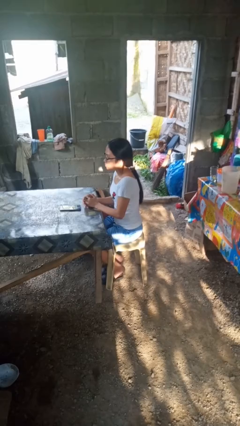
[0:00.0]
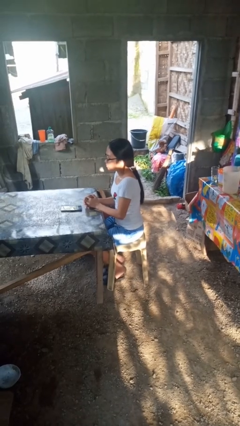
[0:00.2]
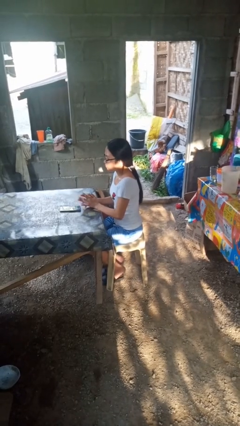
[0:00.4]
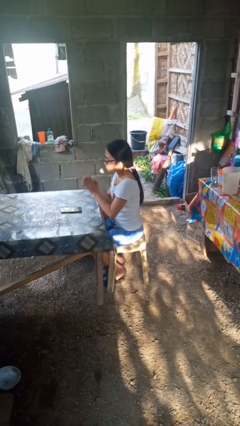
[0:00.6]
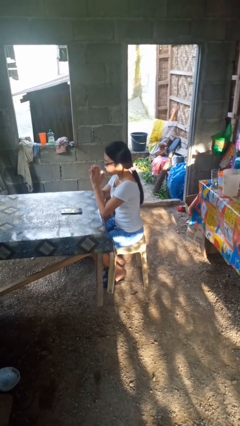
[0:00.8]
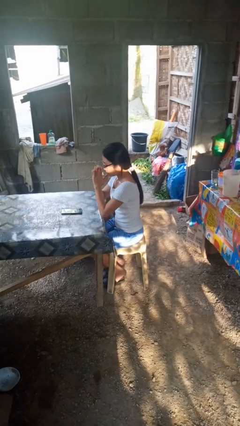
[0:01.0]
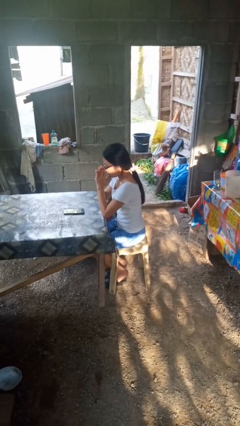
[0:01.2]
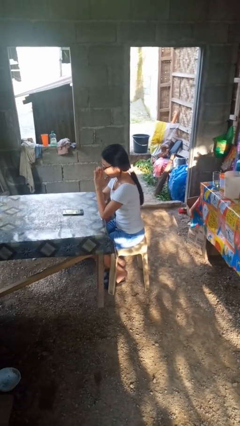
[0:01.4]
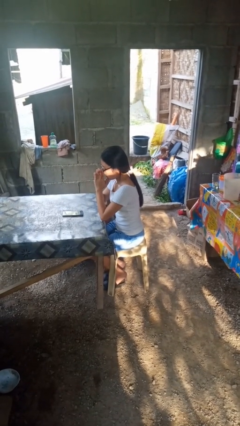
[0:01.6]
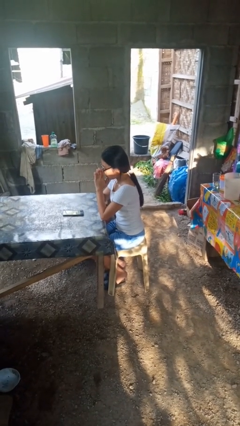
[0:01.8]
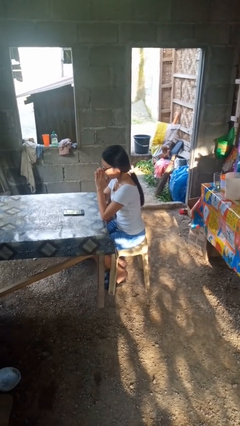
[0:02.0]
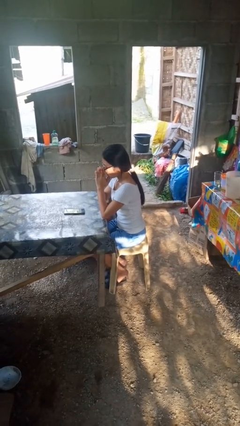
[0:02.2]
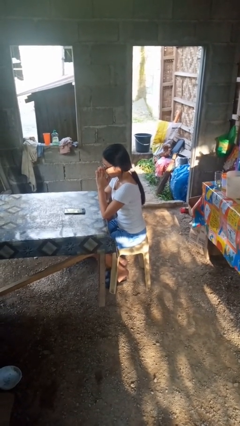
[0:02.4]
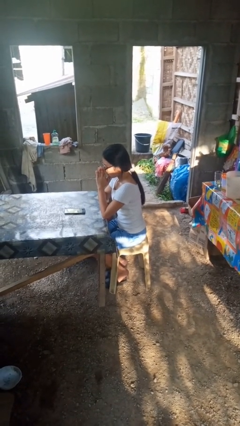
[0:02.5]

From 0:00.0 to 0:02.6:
person prays

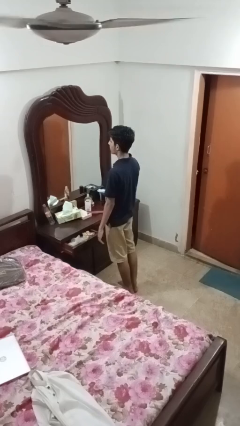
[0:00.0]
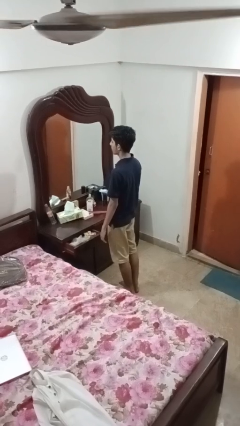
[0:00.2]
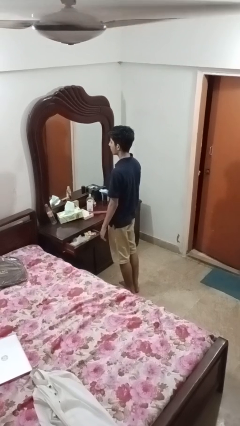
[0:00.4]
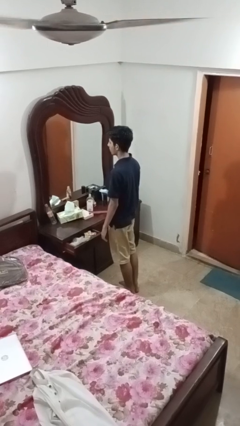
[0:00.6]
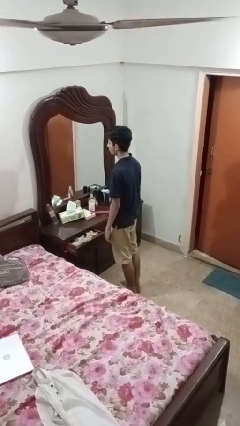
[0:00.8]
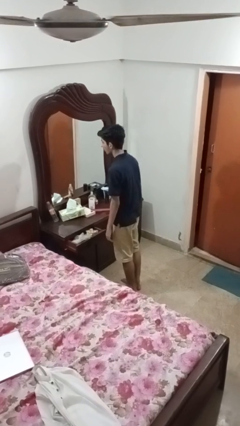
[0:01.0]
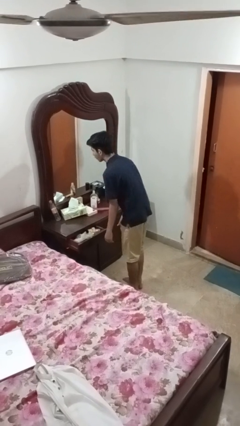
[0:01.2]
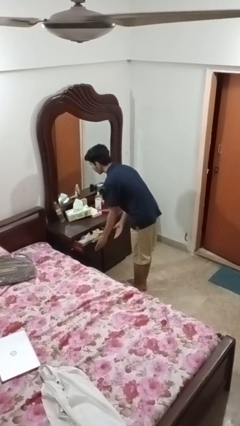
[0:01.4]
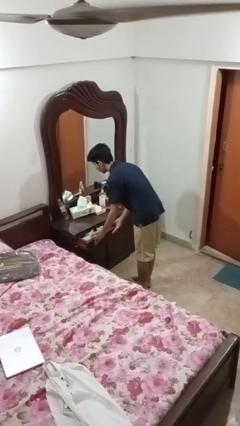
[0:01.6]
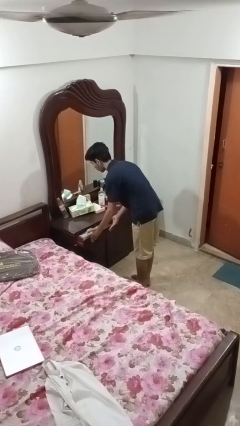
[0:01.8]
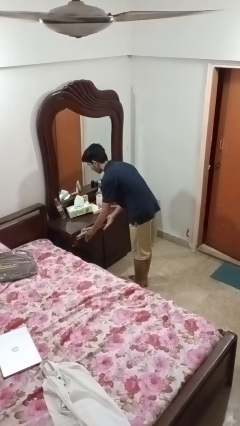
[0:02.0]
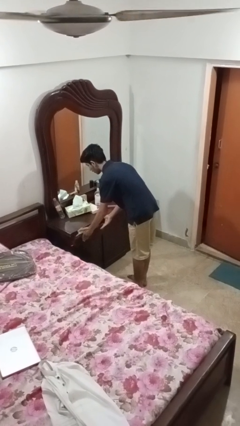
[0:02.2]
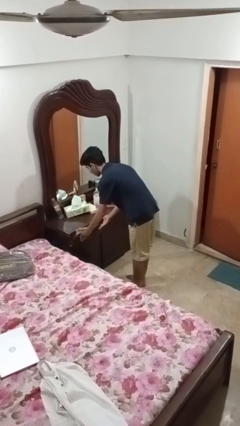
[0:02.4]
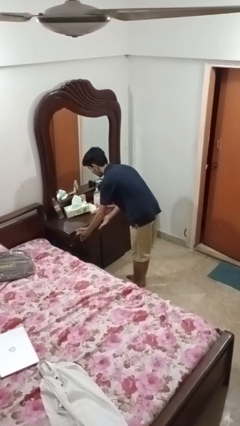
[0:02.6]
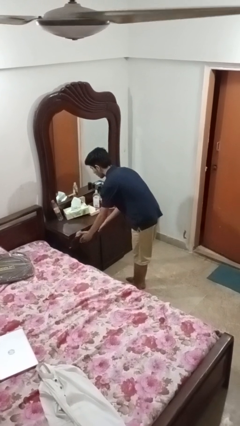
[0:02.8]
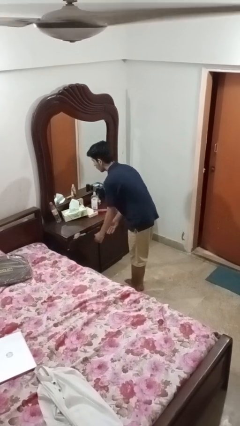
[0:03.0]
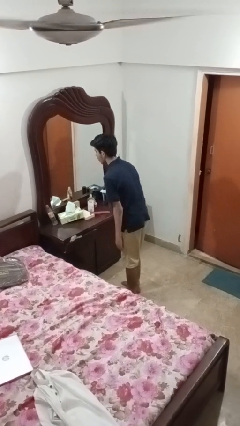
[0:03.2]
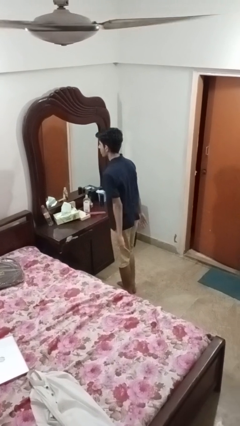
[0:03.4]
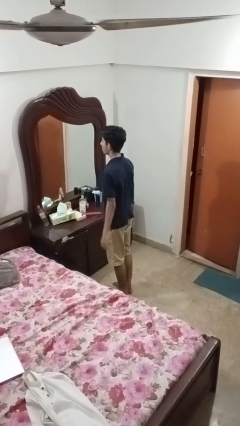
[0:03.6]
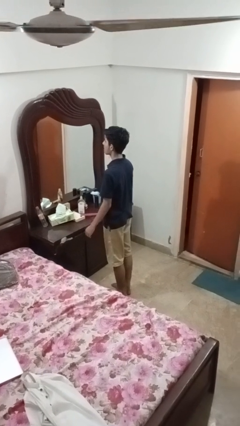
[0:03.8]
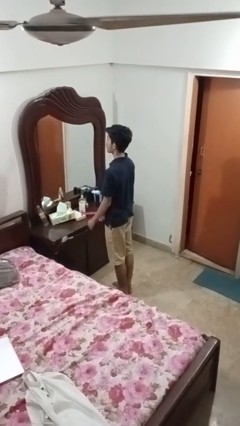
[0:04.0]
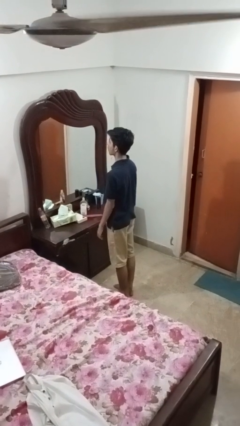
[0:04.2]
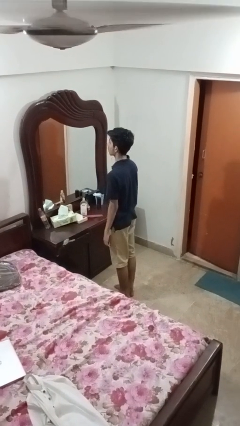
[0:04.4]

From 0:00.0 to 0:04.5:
person closes dresser drawer

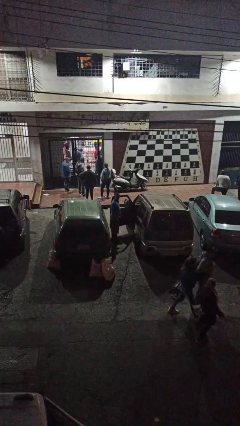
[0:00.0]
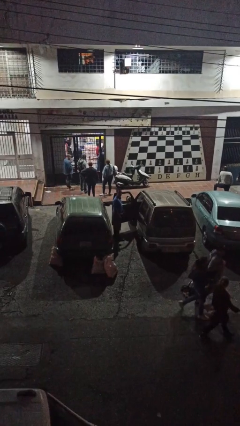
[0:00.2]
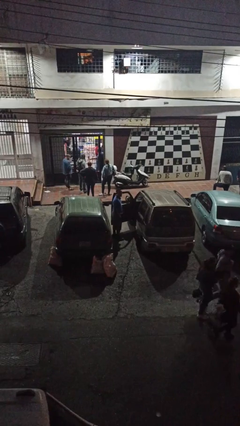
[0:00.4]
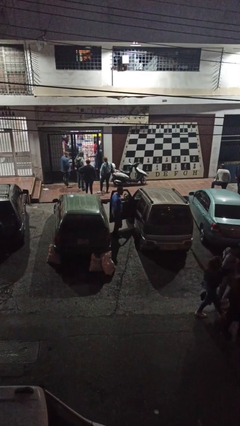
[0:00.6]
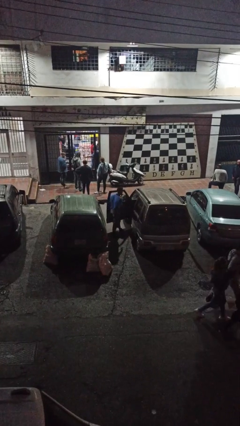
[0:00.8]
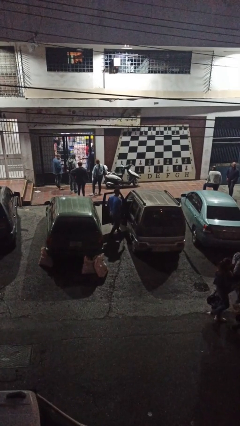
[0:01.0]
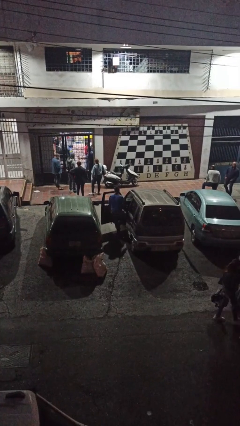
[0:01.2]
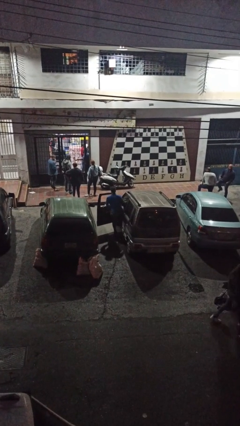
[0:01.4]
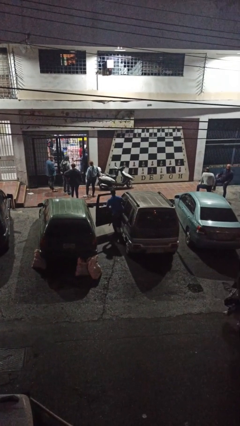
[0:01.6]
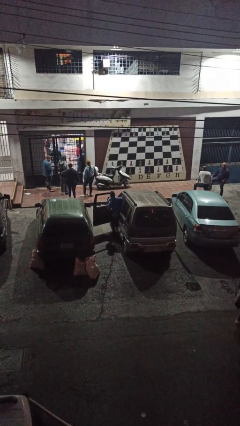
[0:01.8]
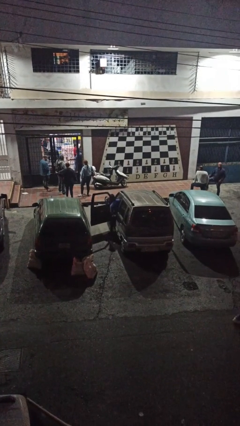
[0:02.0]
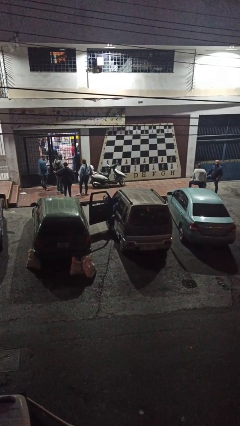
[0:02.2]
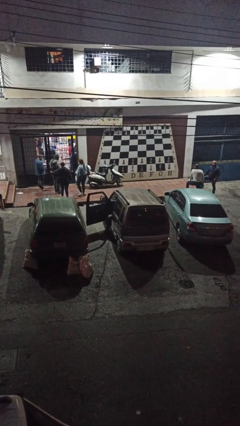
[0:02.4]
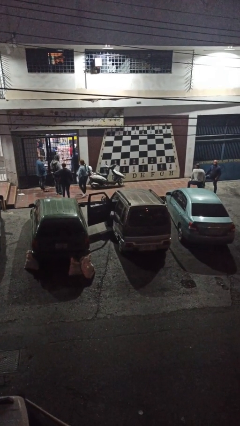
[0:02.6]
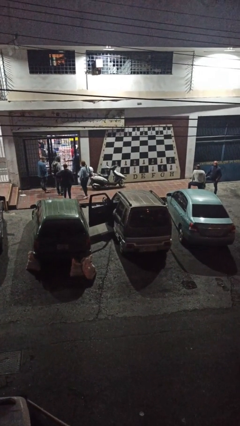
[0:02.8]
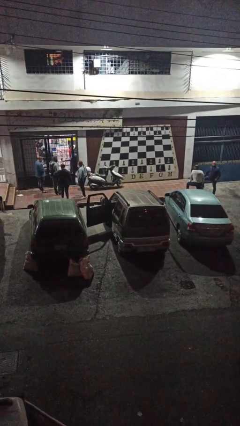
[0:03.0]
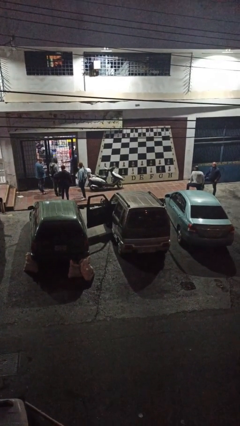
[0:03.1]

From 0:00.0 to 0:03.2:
person enters car

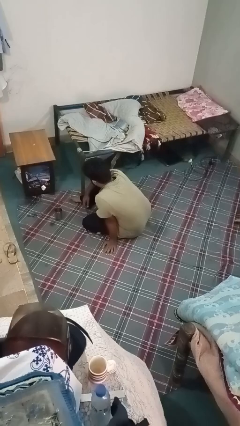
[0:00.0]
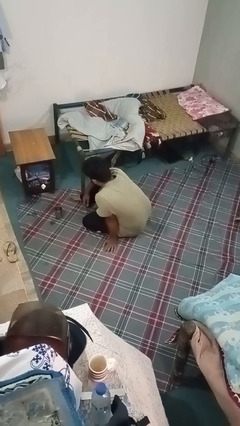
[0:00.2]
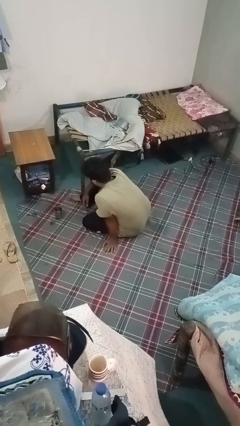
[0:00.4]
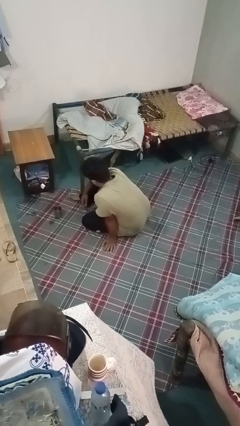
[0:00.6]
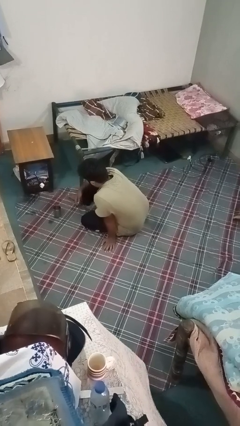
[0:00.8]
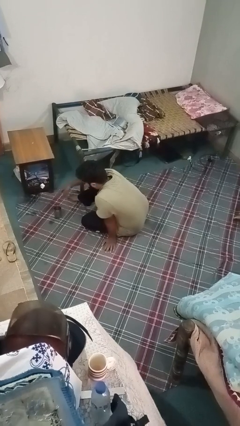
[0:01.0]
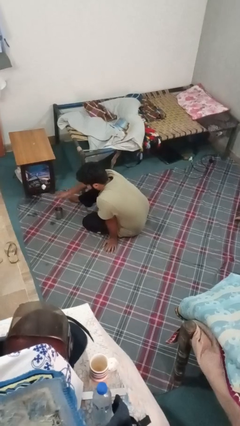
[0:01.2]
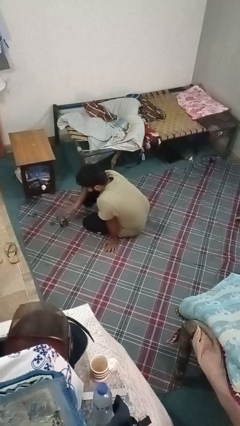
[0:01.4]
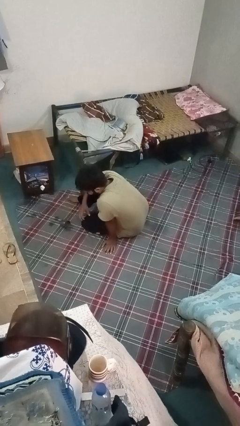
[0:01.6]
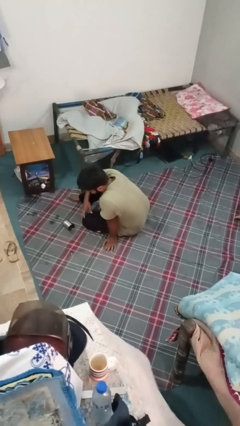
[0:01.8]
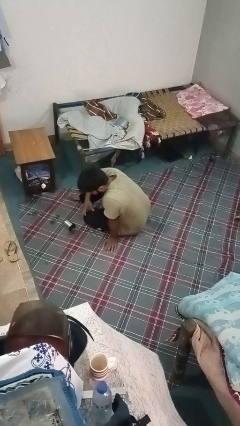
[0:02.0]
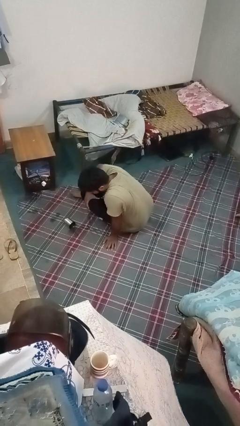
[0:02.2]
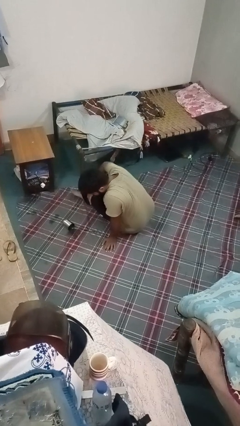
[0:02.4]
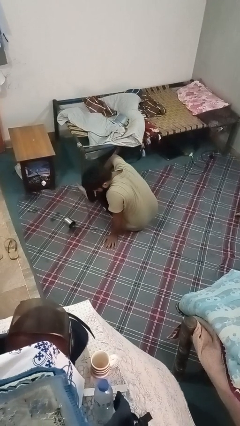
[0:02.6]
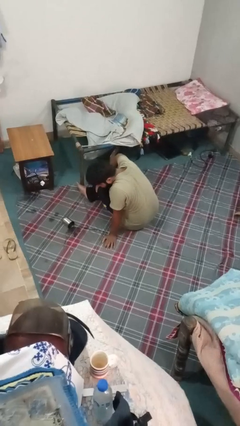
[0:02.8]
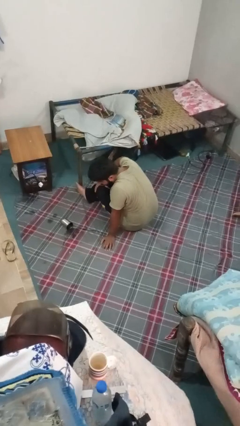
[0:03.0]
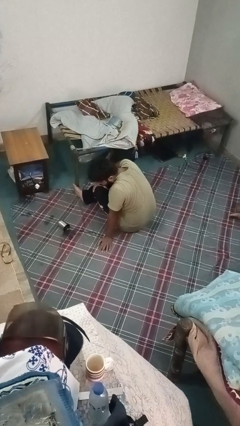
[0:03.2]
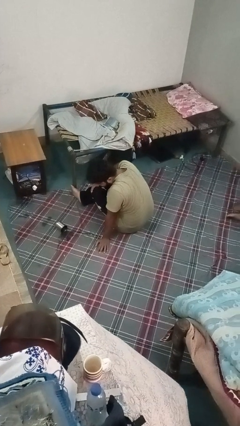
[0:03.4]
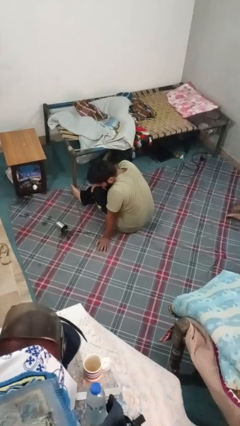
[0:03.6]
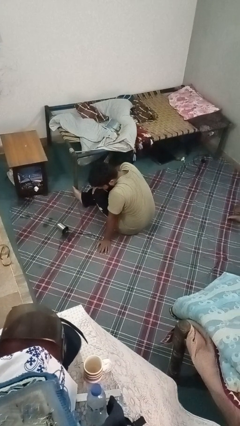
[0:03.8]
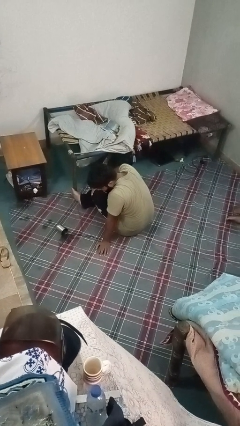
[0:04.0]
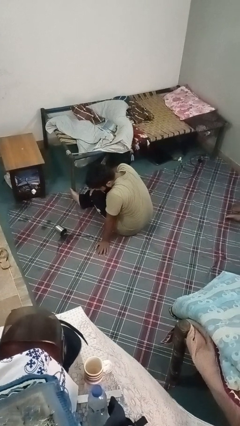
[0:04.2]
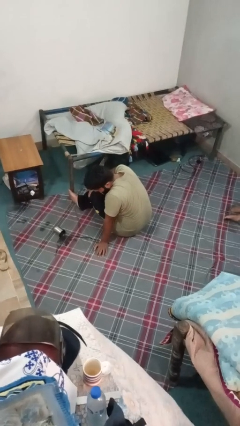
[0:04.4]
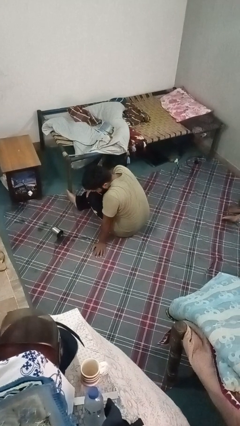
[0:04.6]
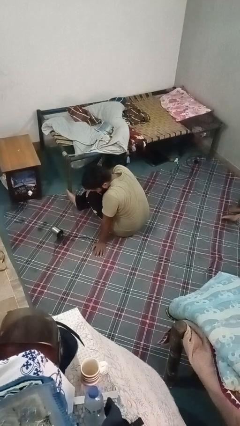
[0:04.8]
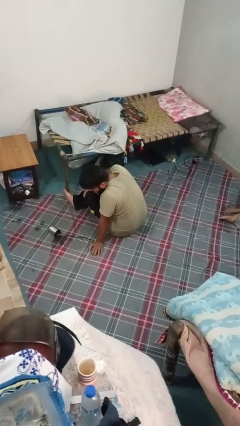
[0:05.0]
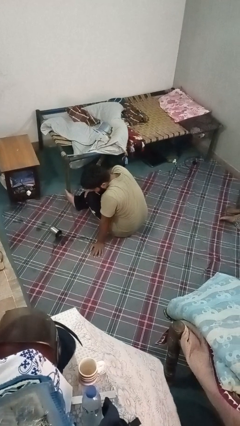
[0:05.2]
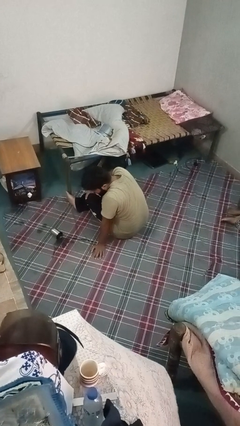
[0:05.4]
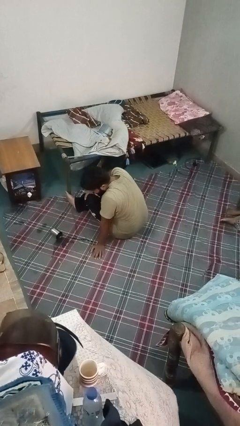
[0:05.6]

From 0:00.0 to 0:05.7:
person spills on floor

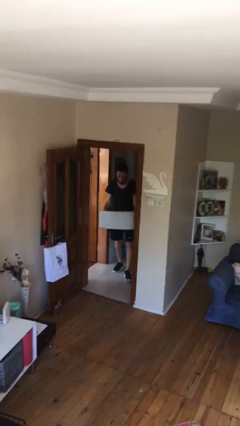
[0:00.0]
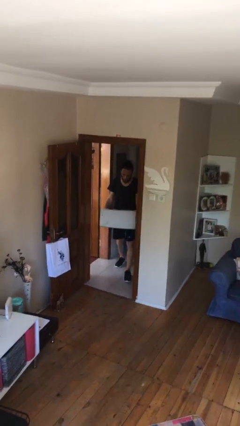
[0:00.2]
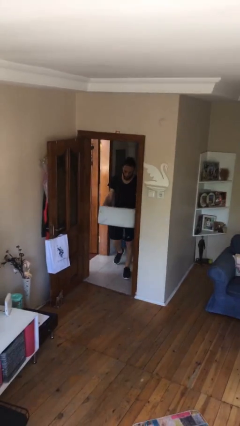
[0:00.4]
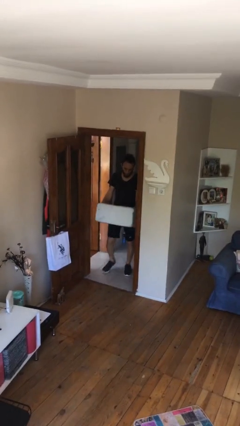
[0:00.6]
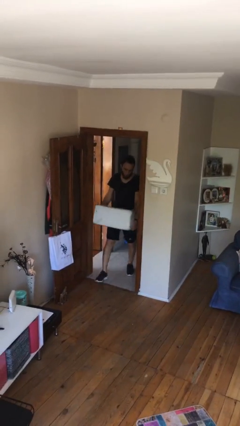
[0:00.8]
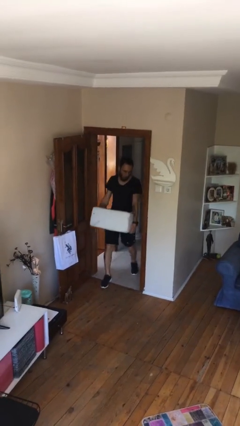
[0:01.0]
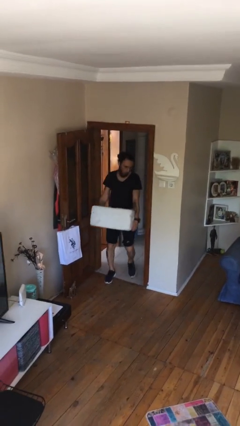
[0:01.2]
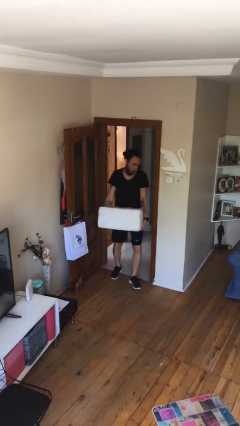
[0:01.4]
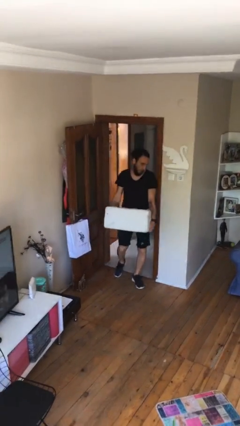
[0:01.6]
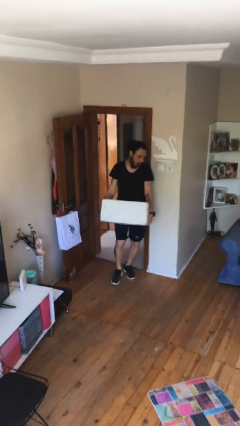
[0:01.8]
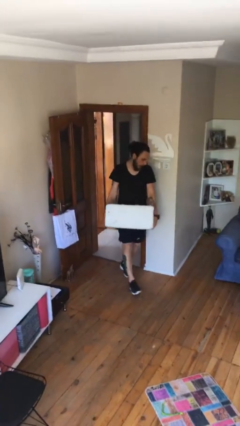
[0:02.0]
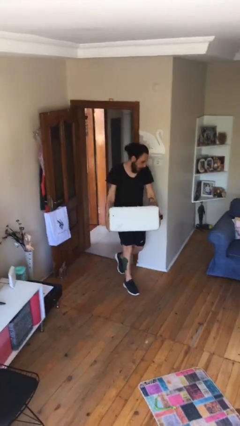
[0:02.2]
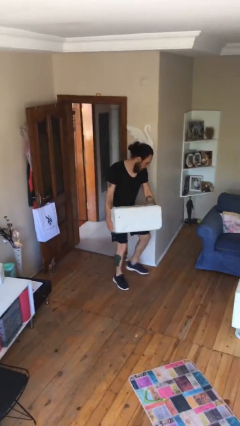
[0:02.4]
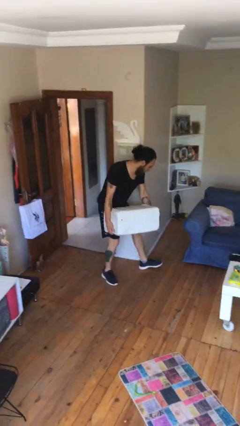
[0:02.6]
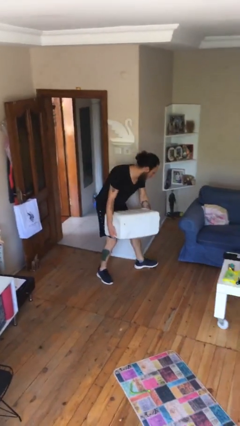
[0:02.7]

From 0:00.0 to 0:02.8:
person carries heavy object
